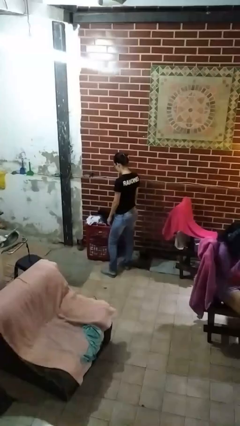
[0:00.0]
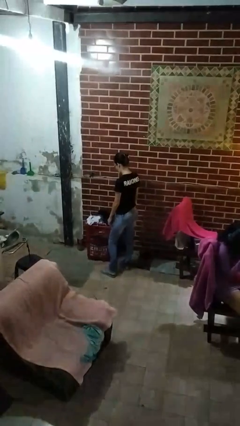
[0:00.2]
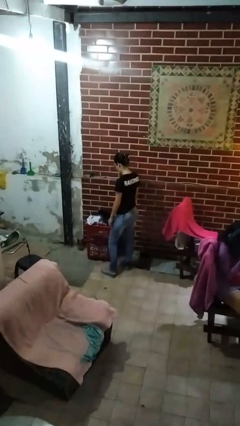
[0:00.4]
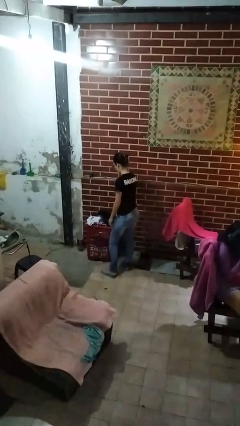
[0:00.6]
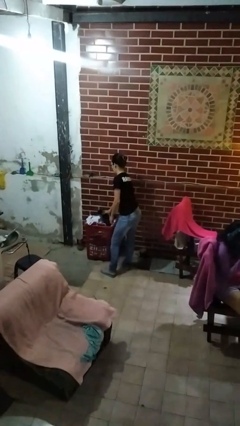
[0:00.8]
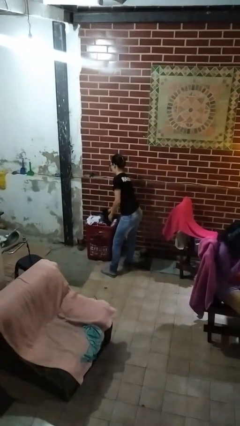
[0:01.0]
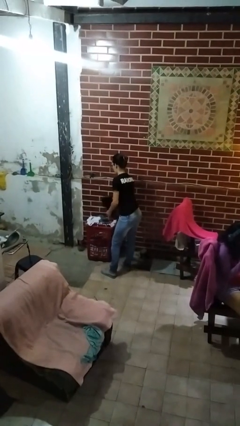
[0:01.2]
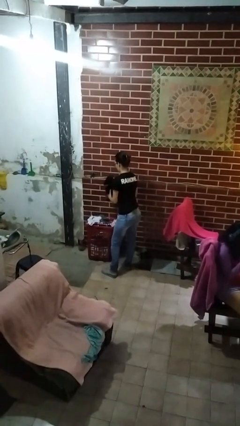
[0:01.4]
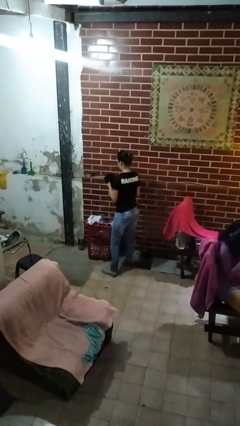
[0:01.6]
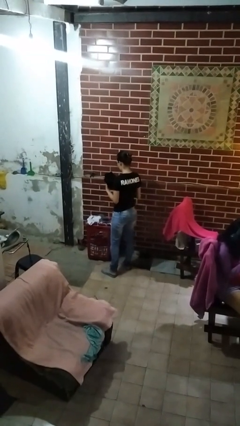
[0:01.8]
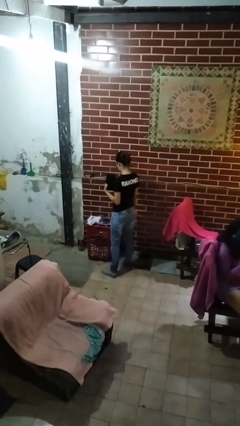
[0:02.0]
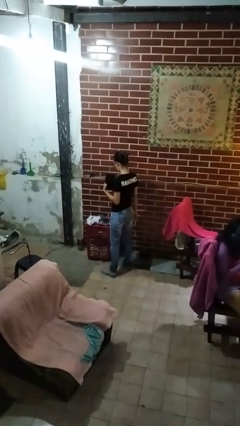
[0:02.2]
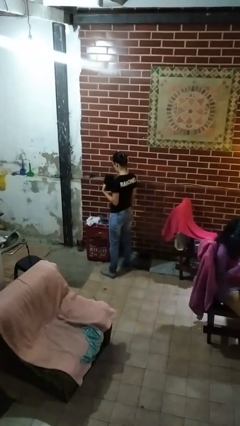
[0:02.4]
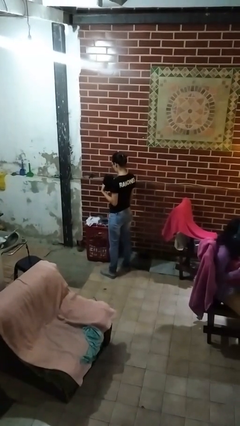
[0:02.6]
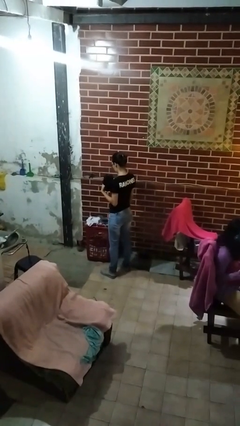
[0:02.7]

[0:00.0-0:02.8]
person takes object from basket

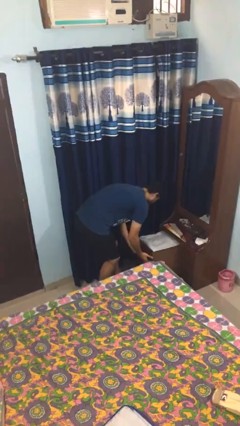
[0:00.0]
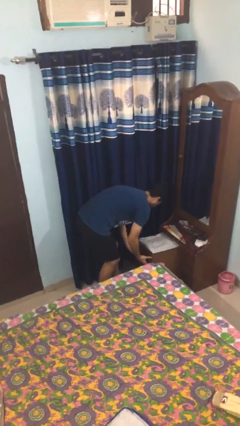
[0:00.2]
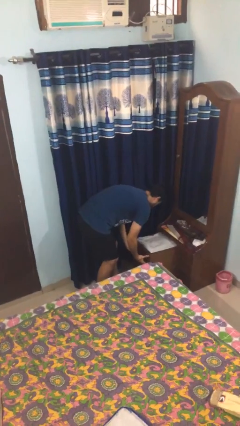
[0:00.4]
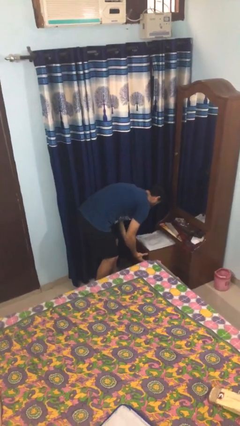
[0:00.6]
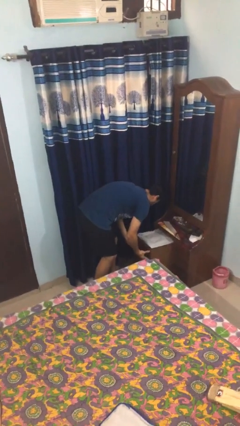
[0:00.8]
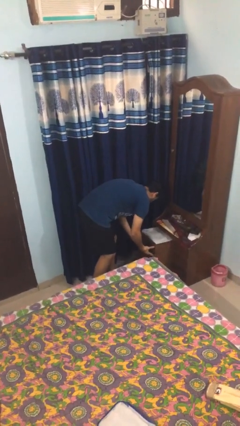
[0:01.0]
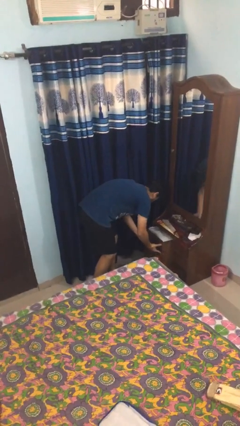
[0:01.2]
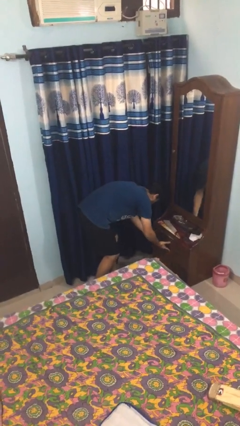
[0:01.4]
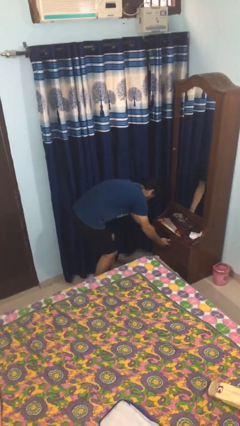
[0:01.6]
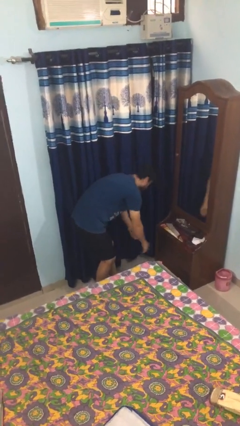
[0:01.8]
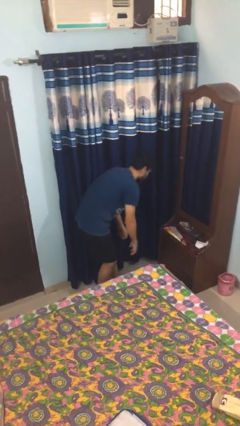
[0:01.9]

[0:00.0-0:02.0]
person closes dresser drawer

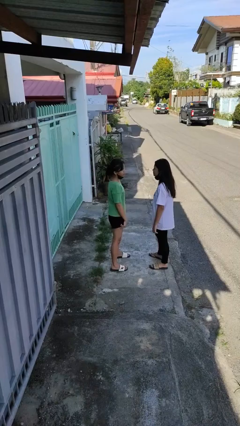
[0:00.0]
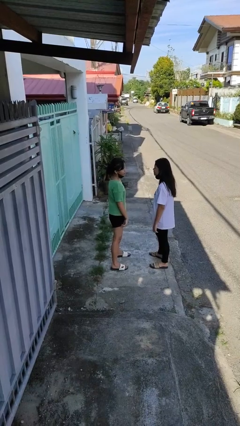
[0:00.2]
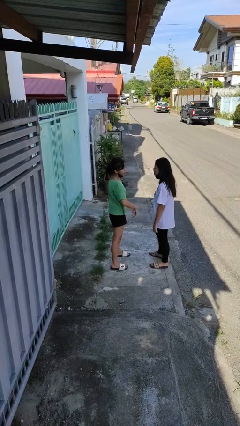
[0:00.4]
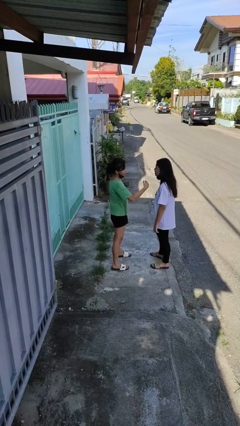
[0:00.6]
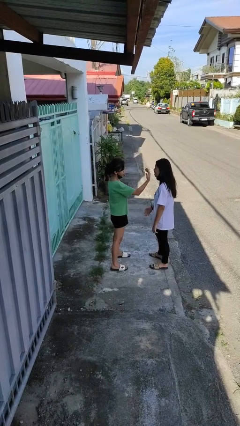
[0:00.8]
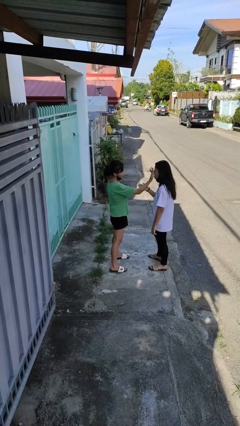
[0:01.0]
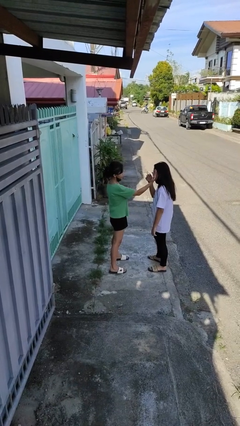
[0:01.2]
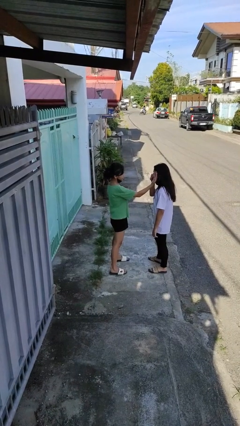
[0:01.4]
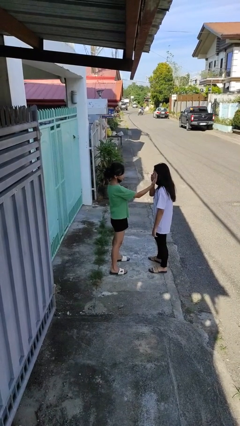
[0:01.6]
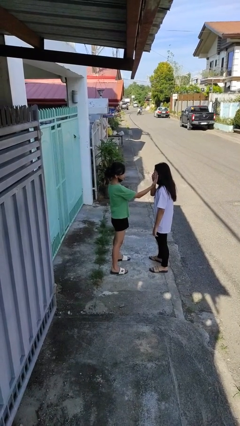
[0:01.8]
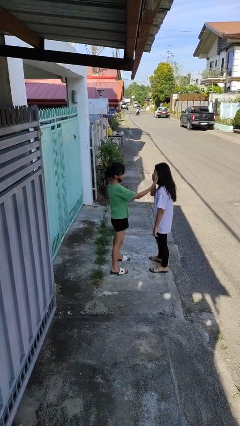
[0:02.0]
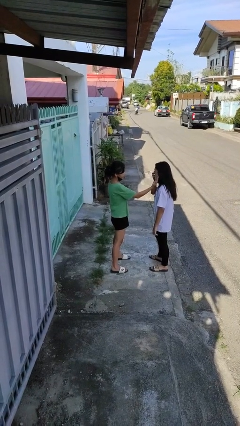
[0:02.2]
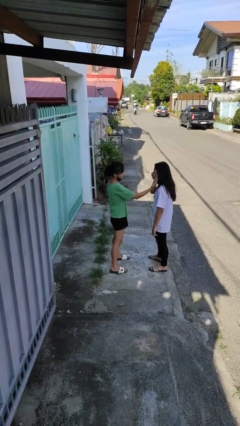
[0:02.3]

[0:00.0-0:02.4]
person touches face of person

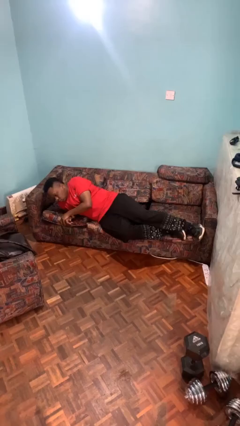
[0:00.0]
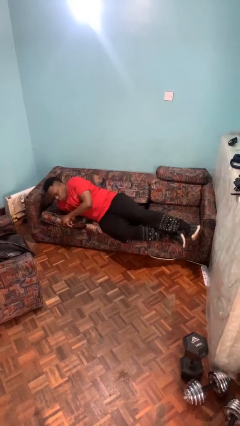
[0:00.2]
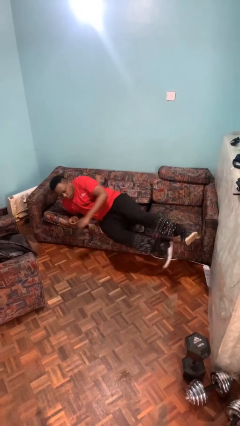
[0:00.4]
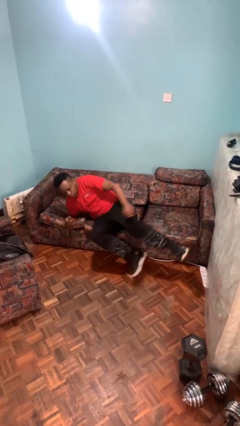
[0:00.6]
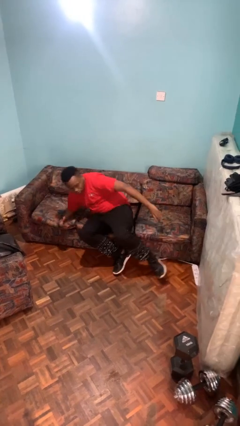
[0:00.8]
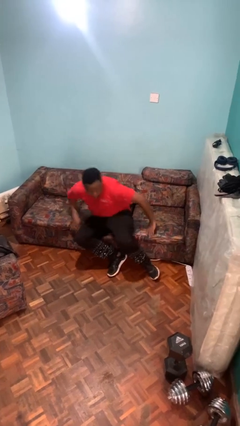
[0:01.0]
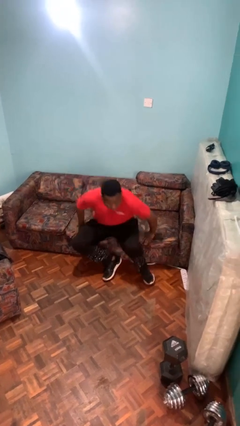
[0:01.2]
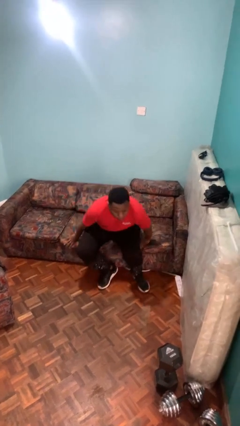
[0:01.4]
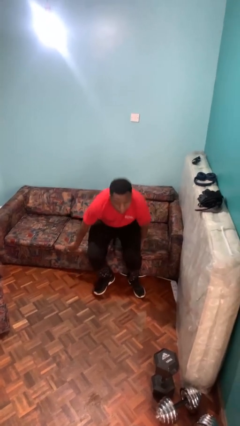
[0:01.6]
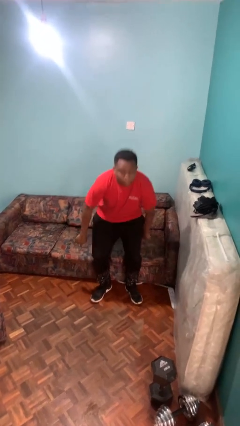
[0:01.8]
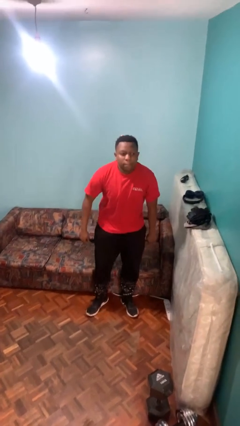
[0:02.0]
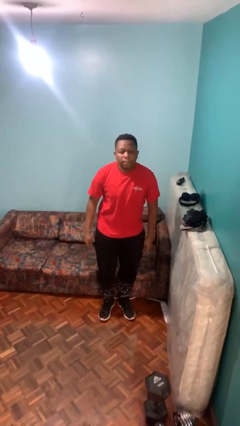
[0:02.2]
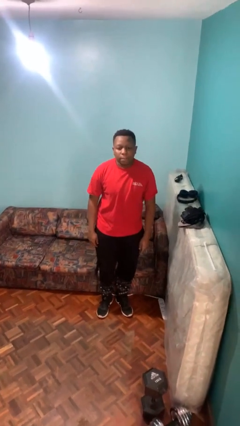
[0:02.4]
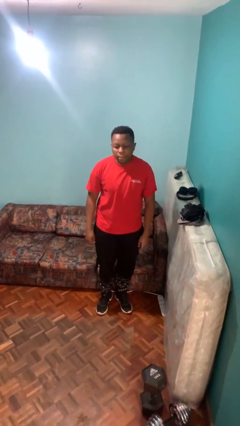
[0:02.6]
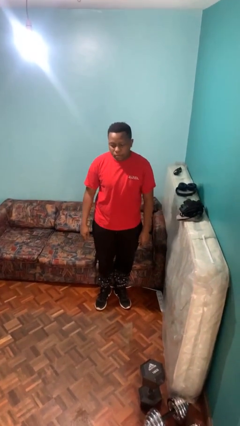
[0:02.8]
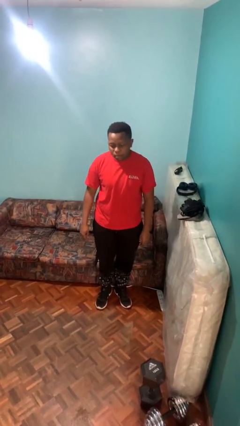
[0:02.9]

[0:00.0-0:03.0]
person stands up

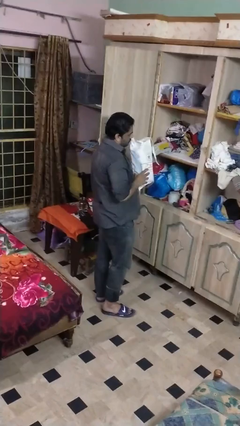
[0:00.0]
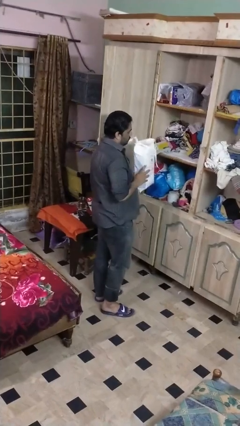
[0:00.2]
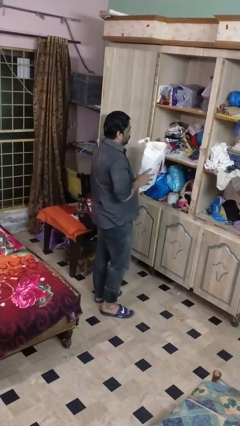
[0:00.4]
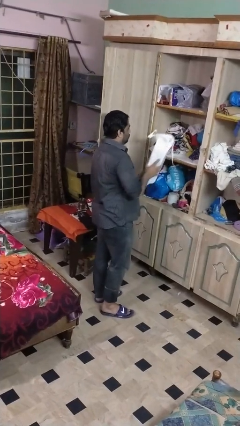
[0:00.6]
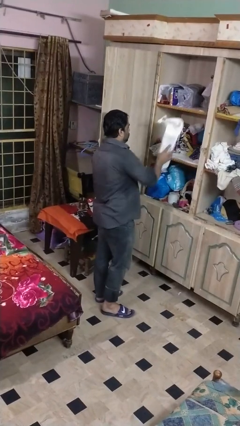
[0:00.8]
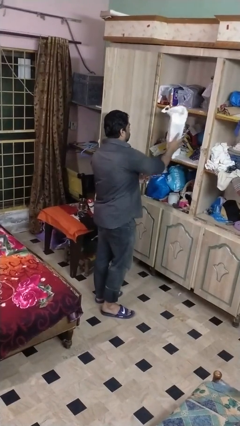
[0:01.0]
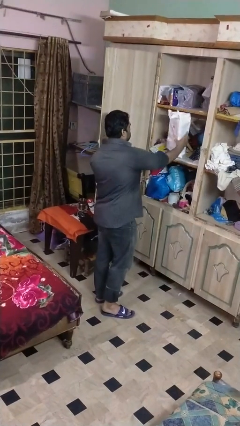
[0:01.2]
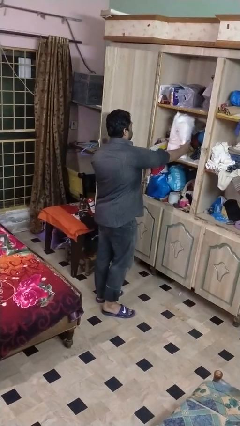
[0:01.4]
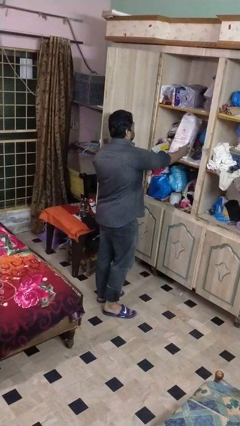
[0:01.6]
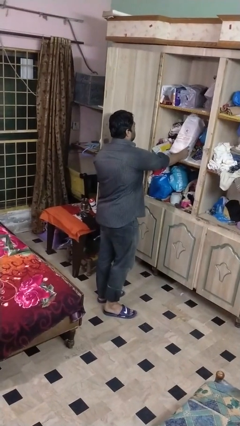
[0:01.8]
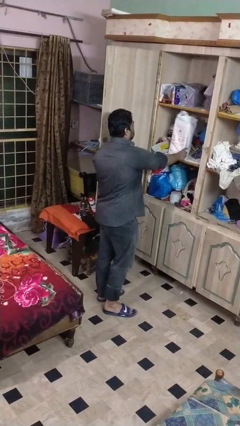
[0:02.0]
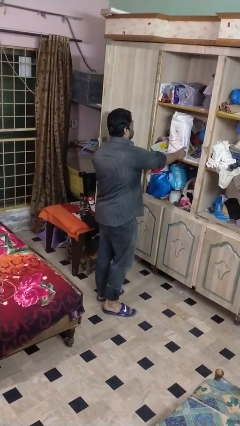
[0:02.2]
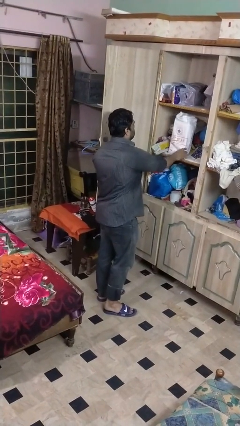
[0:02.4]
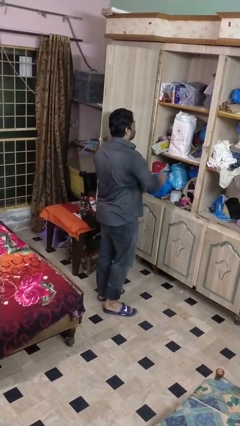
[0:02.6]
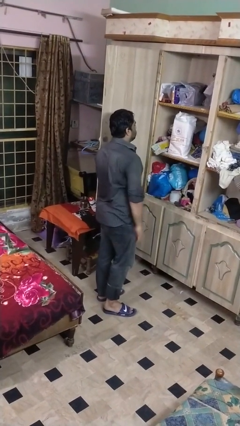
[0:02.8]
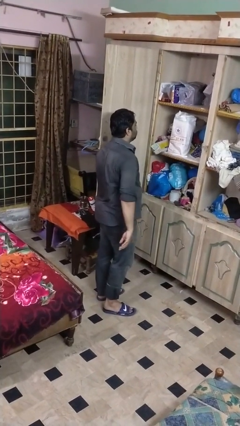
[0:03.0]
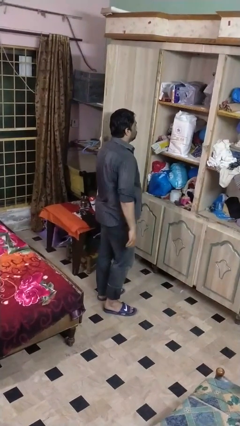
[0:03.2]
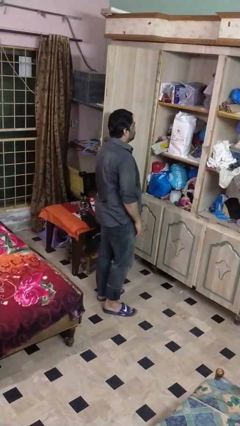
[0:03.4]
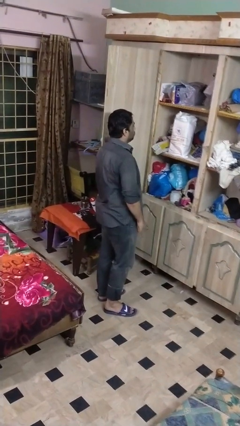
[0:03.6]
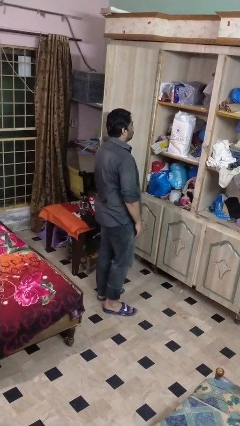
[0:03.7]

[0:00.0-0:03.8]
person puts down object into cabinet

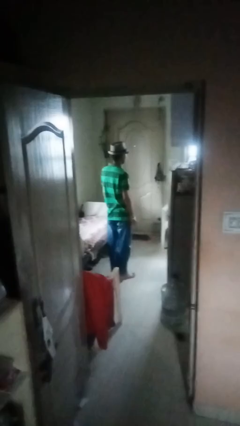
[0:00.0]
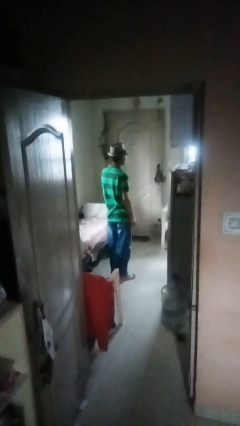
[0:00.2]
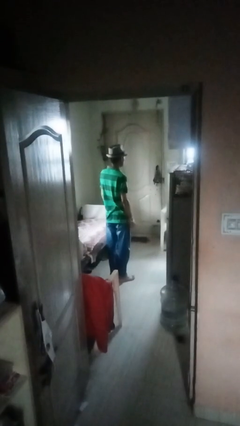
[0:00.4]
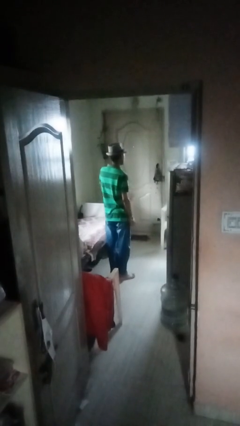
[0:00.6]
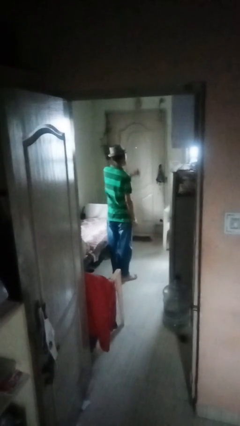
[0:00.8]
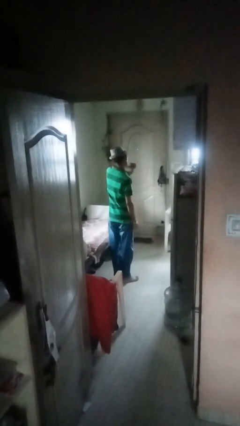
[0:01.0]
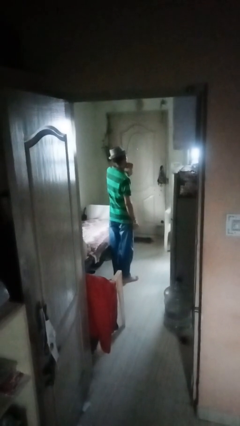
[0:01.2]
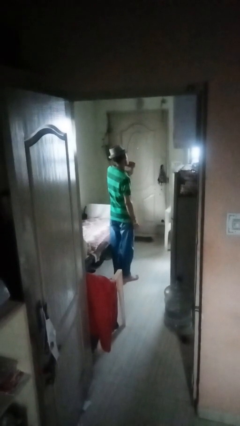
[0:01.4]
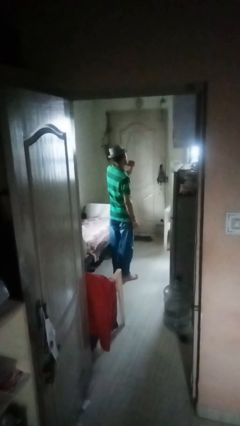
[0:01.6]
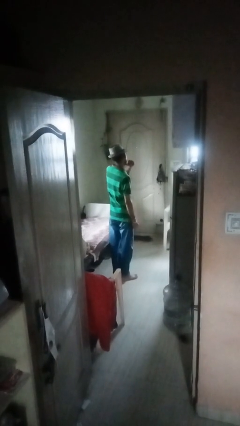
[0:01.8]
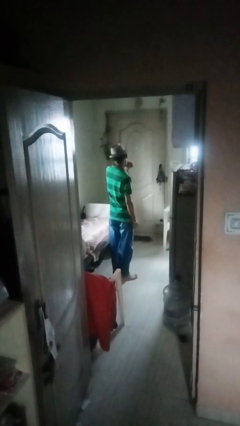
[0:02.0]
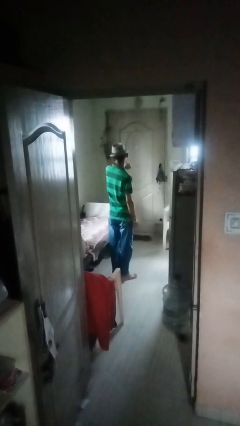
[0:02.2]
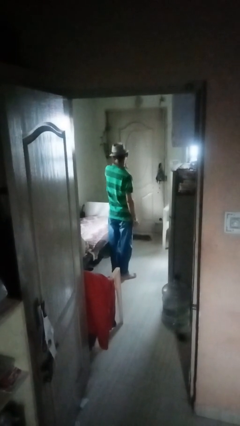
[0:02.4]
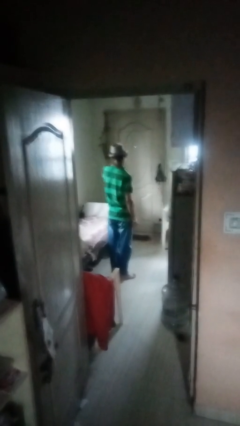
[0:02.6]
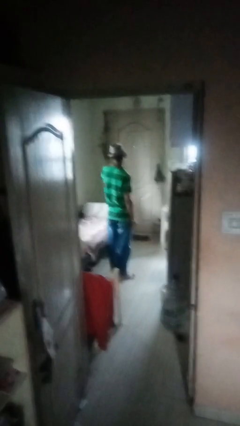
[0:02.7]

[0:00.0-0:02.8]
person gestures cut

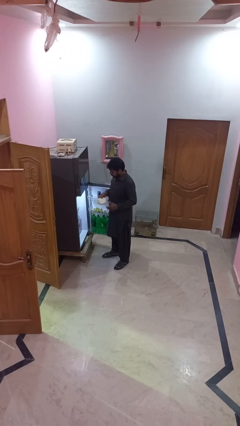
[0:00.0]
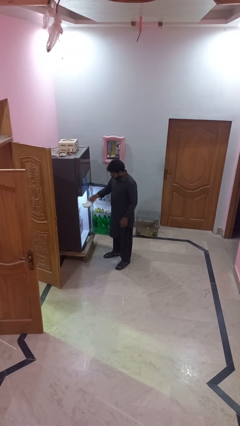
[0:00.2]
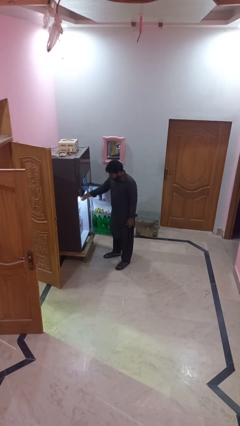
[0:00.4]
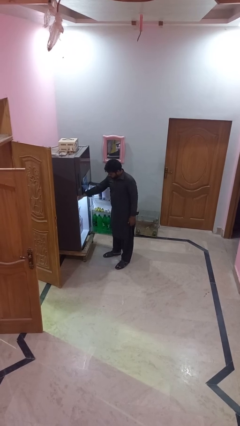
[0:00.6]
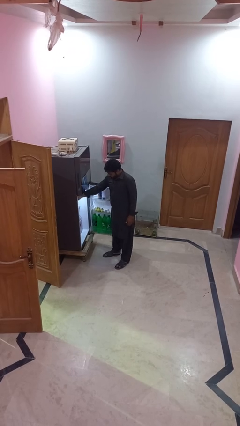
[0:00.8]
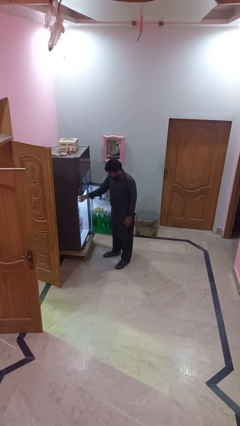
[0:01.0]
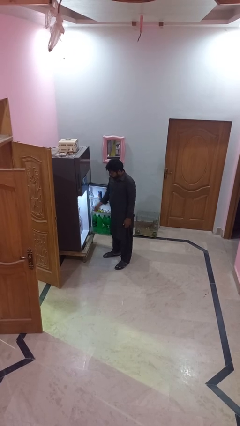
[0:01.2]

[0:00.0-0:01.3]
person puts object into refrigerator
